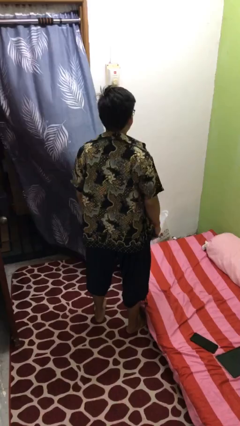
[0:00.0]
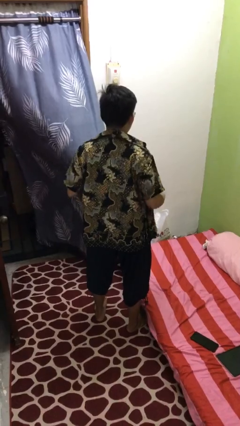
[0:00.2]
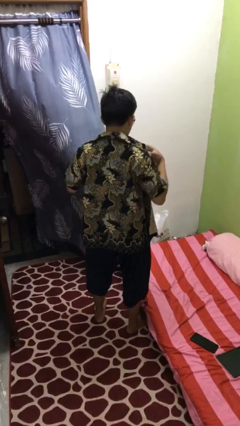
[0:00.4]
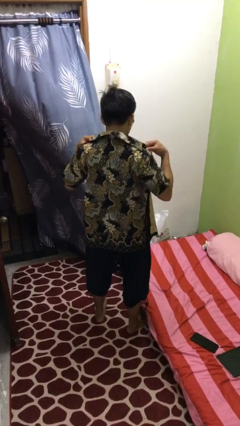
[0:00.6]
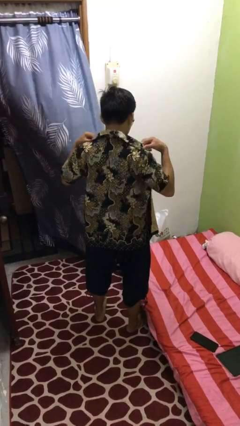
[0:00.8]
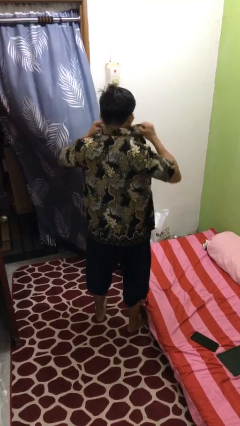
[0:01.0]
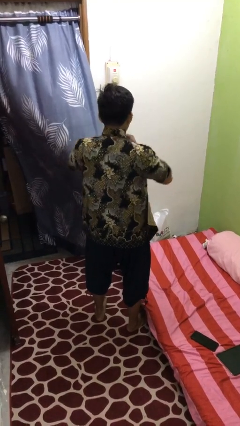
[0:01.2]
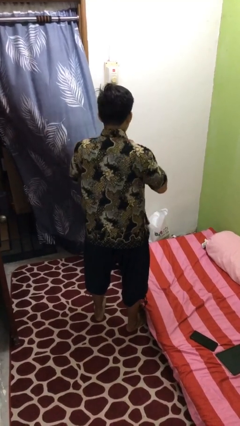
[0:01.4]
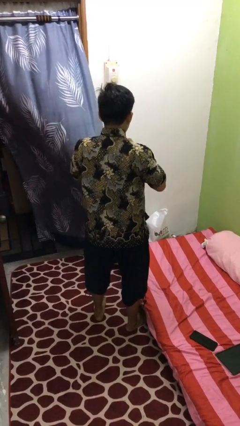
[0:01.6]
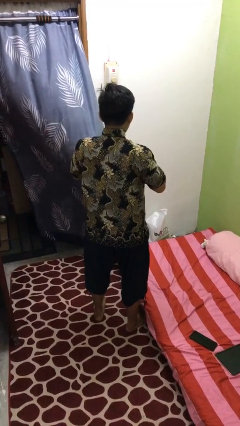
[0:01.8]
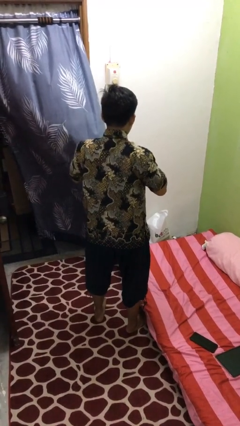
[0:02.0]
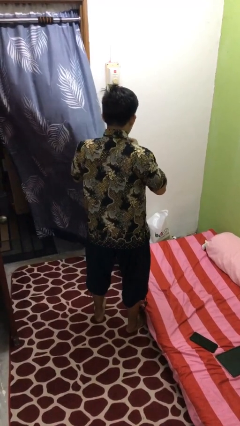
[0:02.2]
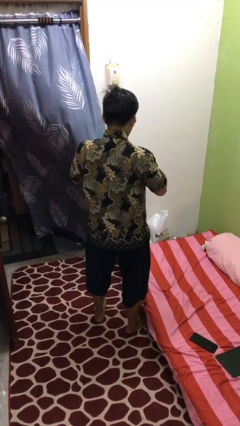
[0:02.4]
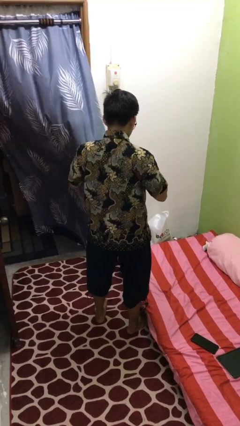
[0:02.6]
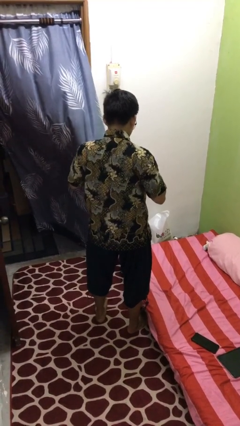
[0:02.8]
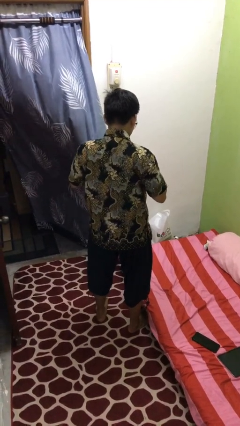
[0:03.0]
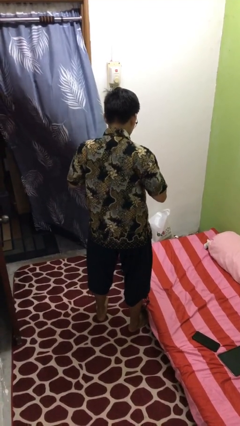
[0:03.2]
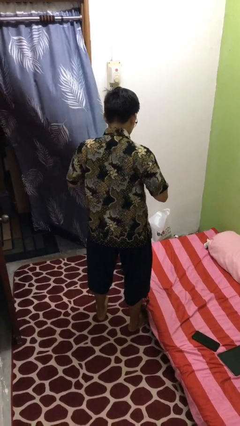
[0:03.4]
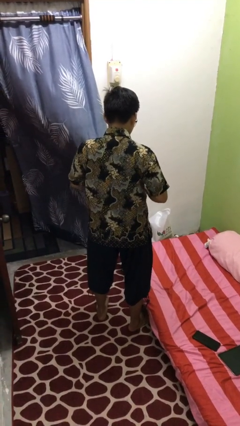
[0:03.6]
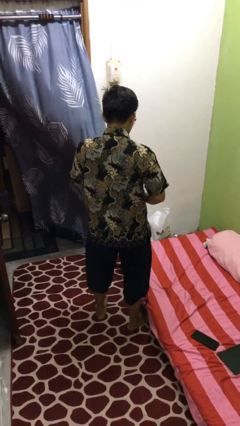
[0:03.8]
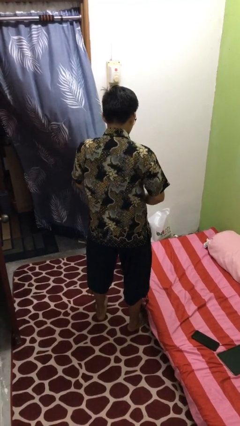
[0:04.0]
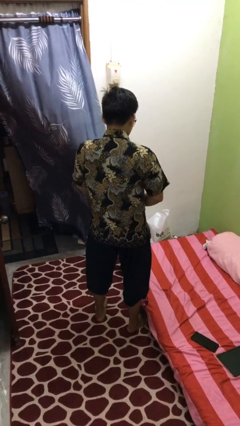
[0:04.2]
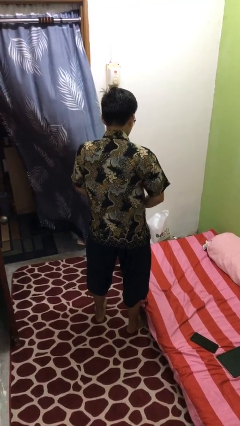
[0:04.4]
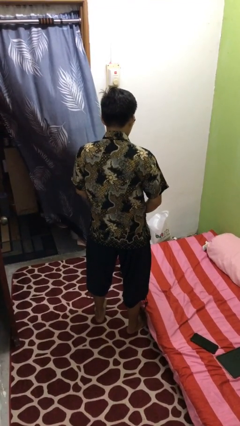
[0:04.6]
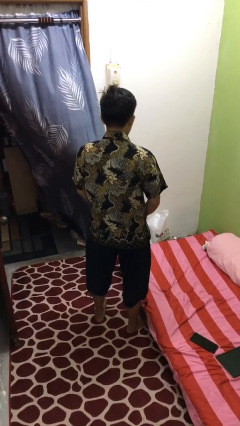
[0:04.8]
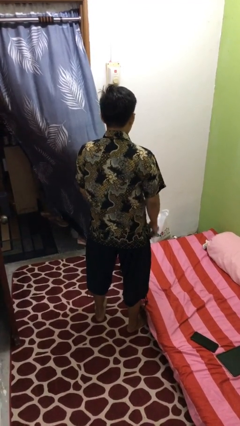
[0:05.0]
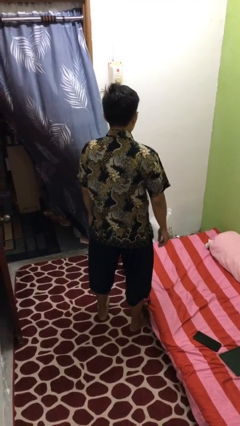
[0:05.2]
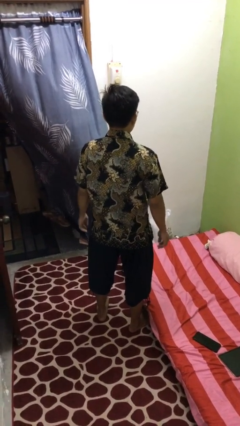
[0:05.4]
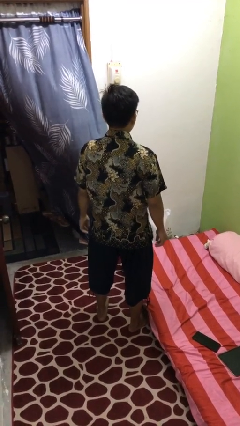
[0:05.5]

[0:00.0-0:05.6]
person buttons shirt

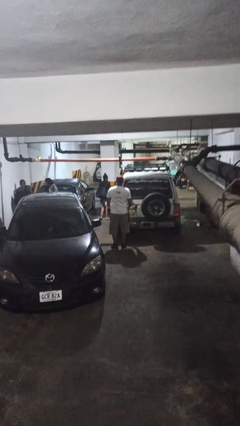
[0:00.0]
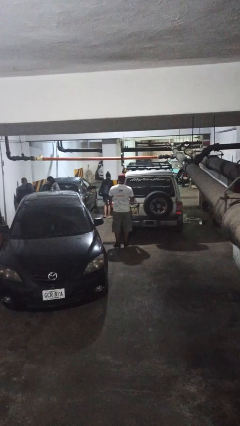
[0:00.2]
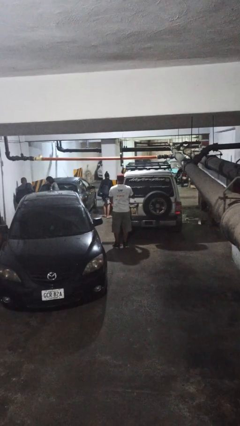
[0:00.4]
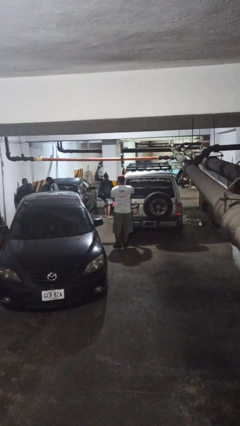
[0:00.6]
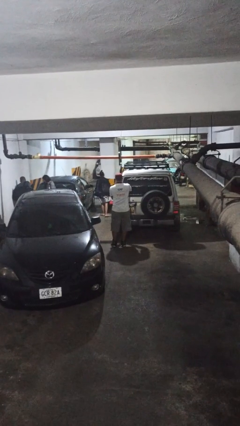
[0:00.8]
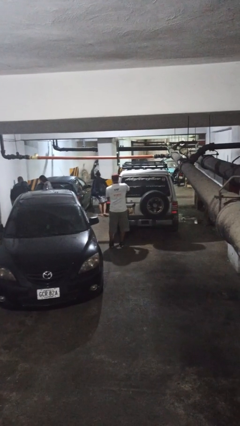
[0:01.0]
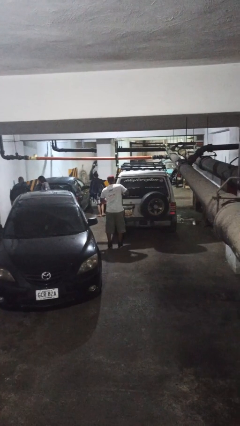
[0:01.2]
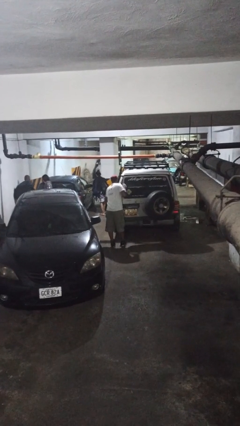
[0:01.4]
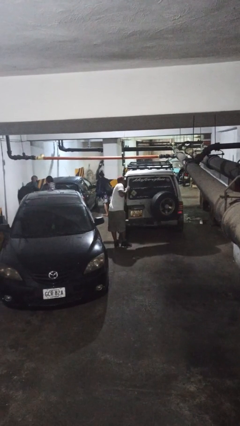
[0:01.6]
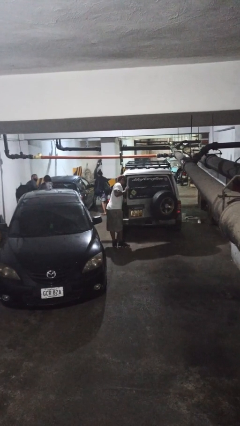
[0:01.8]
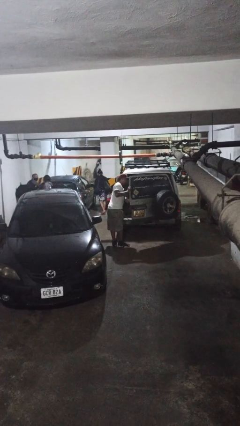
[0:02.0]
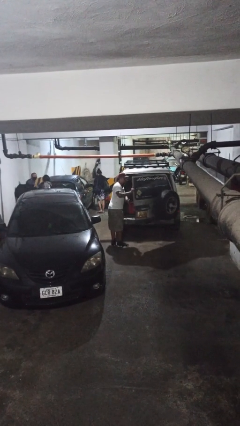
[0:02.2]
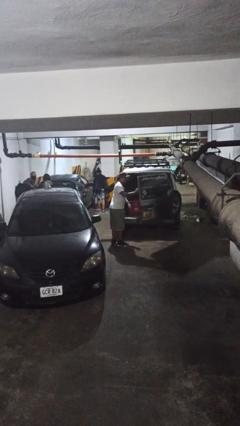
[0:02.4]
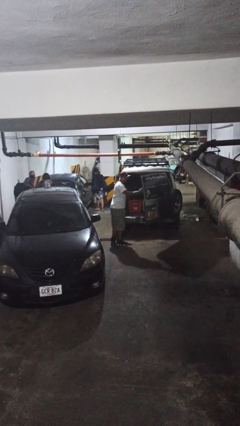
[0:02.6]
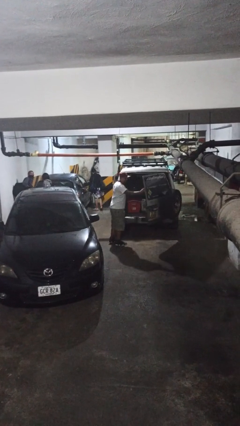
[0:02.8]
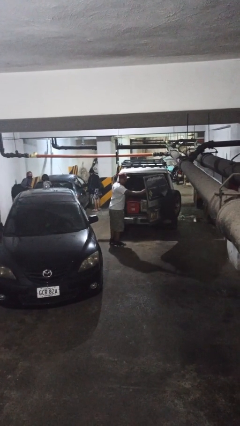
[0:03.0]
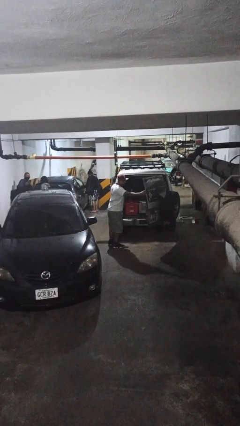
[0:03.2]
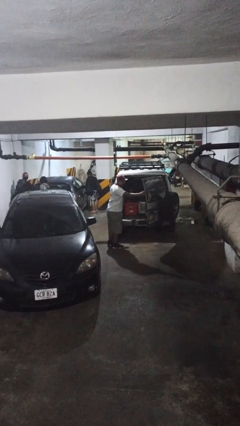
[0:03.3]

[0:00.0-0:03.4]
person opens car trunk

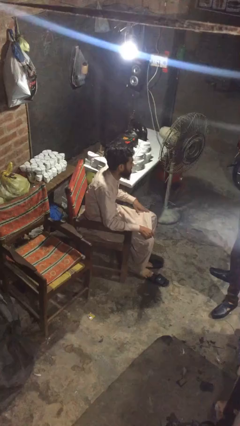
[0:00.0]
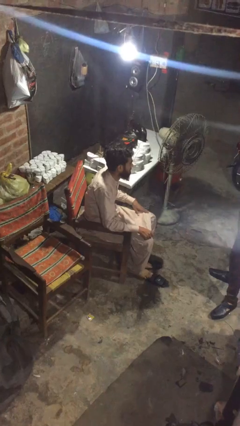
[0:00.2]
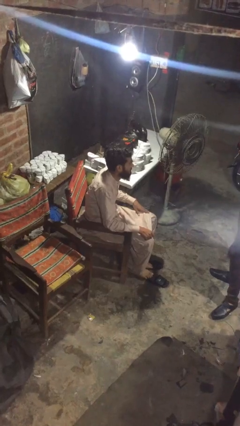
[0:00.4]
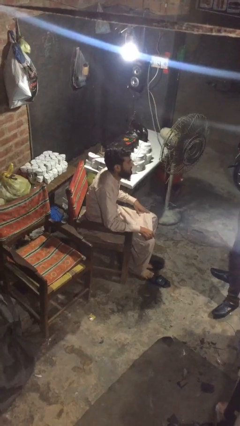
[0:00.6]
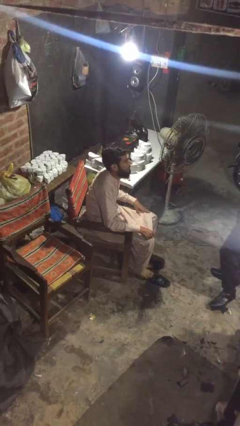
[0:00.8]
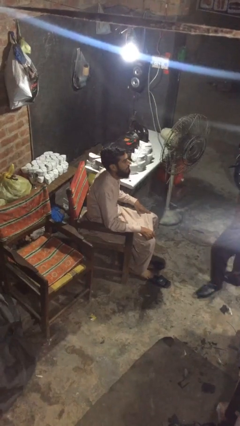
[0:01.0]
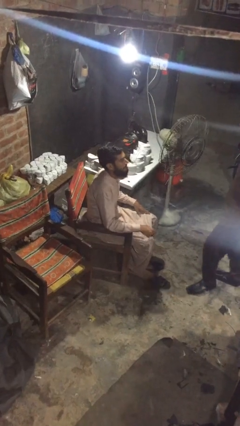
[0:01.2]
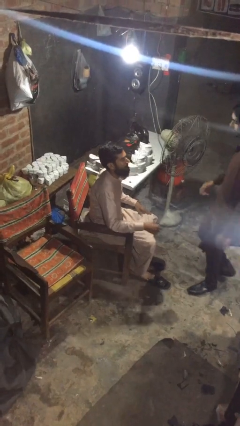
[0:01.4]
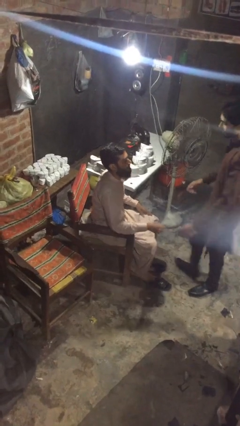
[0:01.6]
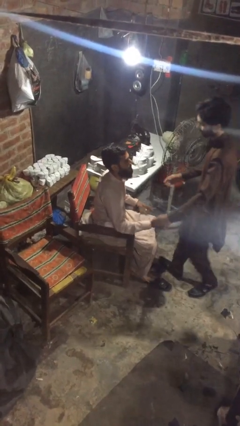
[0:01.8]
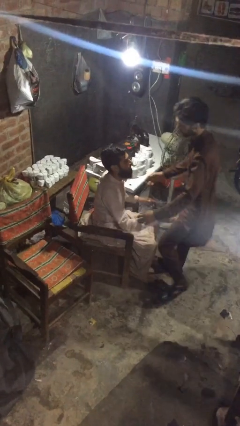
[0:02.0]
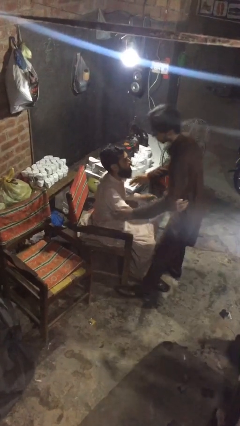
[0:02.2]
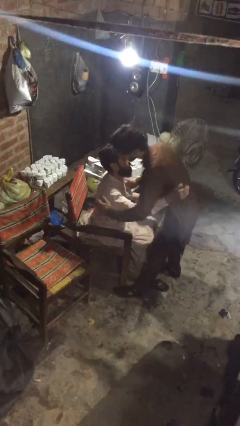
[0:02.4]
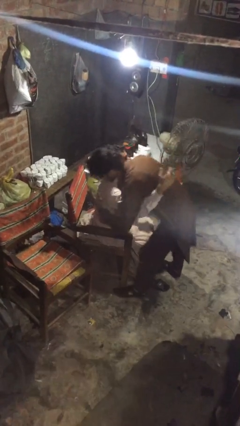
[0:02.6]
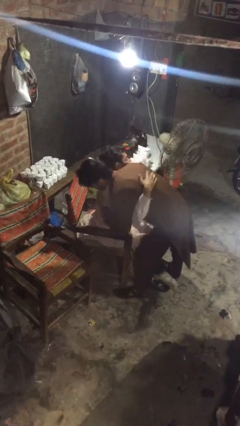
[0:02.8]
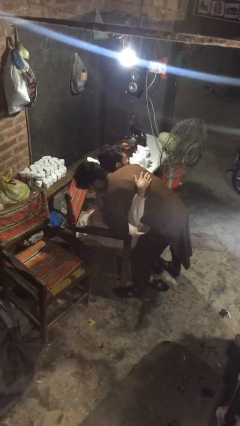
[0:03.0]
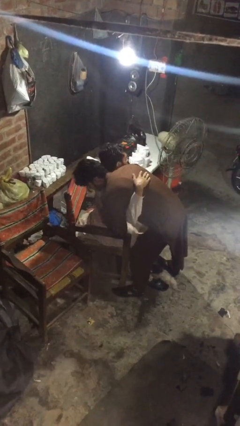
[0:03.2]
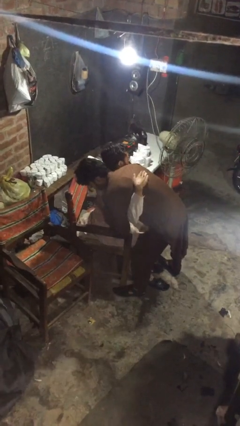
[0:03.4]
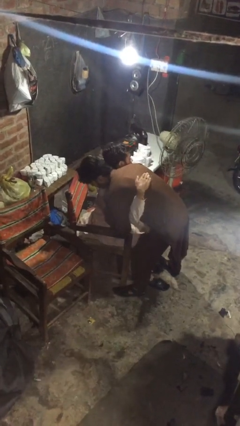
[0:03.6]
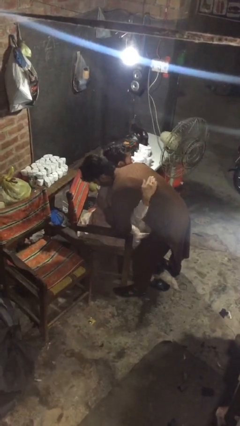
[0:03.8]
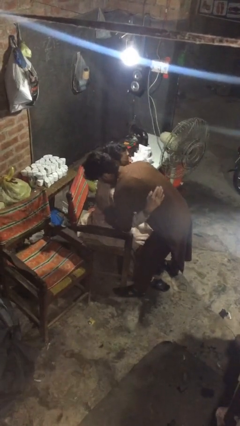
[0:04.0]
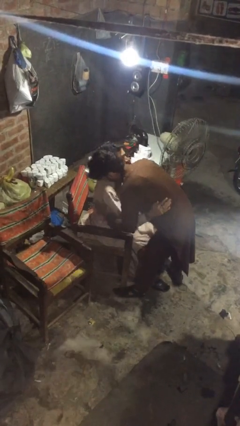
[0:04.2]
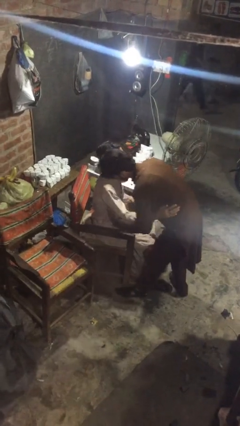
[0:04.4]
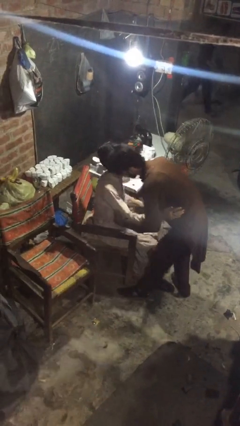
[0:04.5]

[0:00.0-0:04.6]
person embraces person

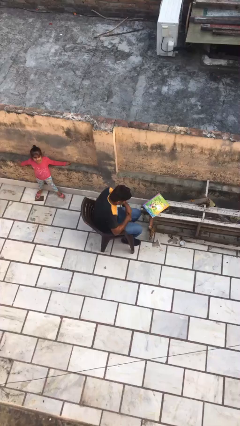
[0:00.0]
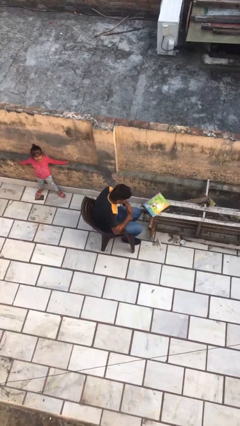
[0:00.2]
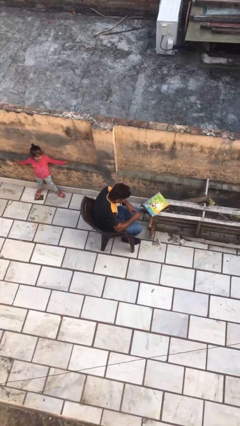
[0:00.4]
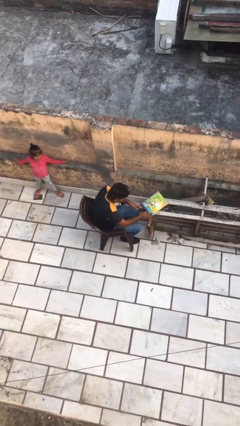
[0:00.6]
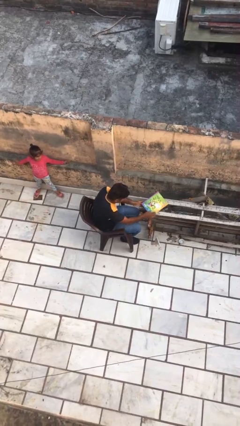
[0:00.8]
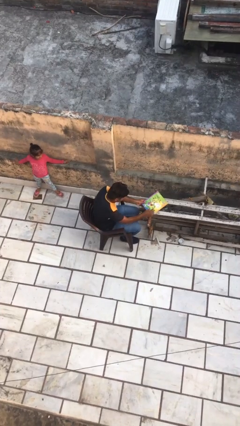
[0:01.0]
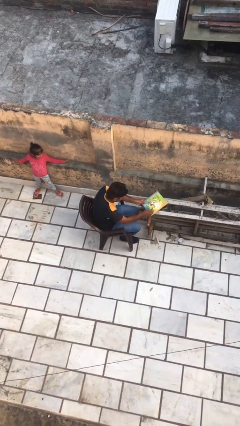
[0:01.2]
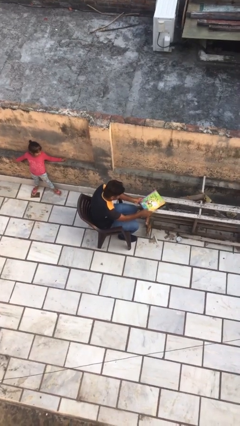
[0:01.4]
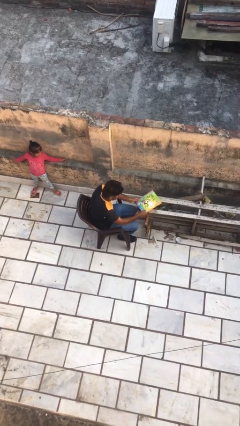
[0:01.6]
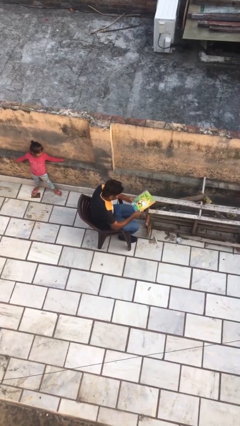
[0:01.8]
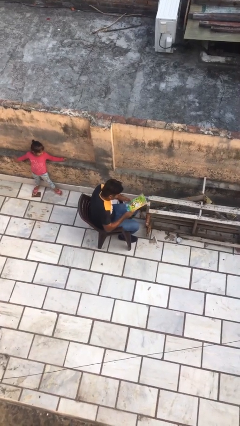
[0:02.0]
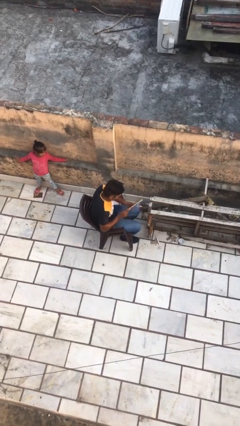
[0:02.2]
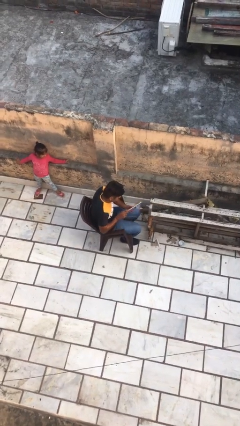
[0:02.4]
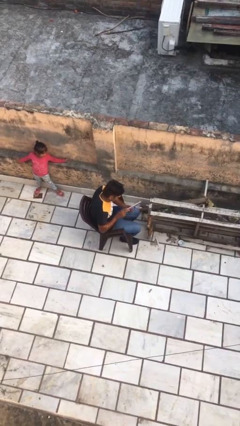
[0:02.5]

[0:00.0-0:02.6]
person picks up object from table

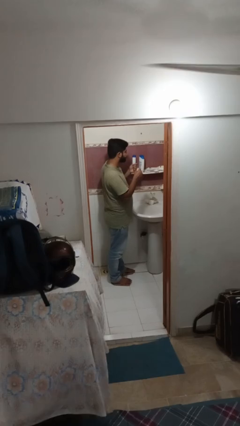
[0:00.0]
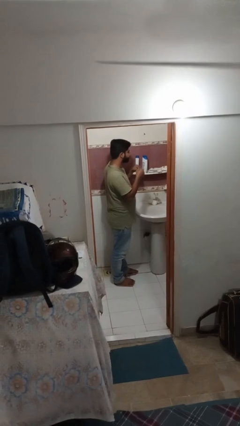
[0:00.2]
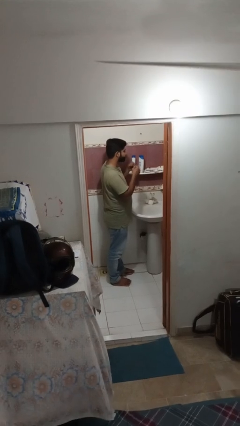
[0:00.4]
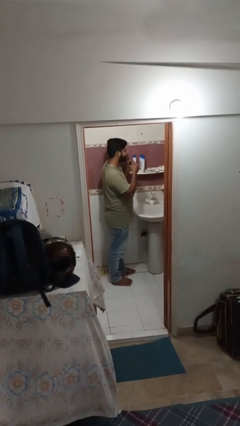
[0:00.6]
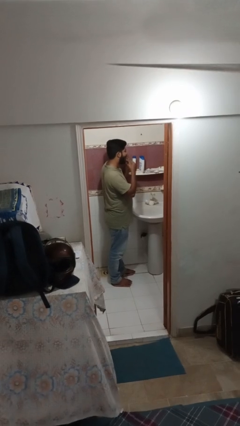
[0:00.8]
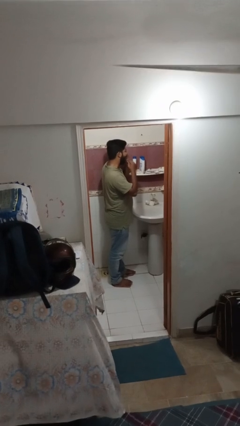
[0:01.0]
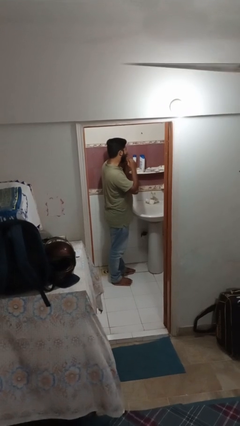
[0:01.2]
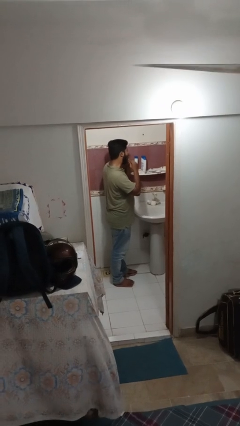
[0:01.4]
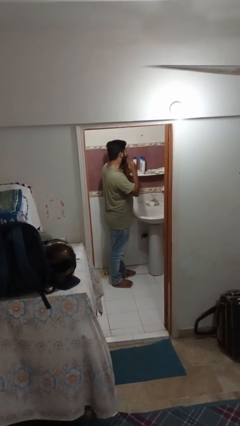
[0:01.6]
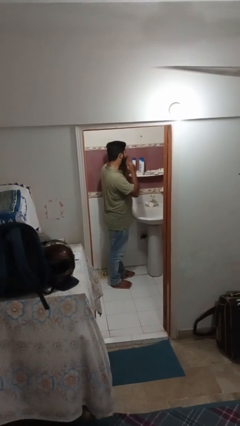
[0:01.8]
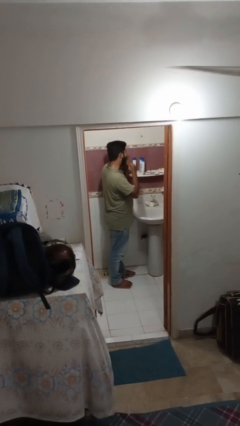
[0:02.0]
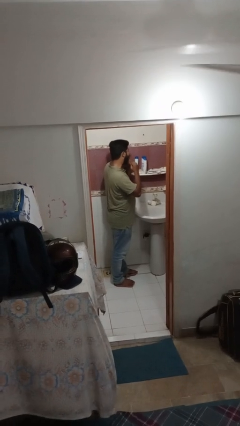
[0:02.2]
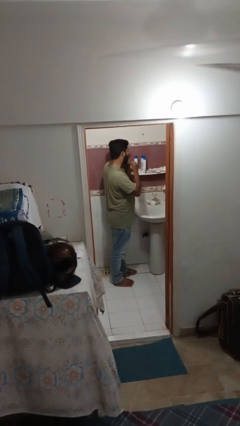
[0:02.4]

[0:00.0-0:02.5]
person flosses
